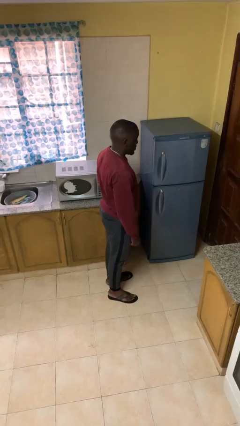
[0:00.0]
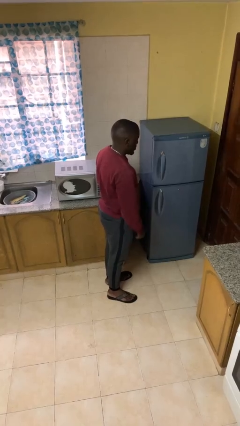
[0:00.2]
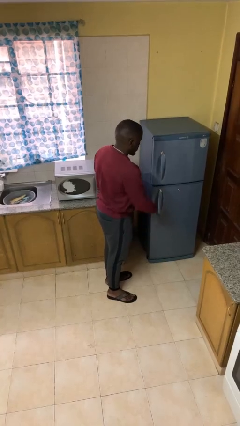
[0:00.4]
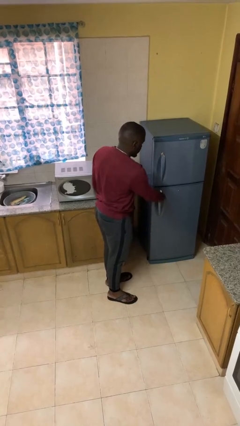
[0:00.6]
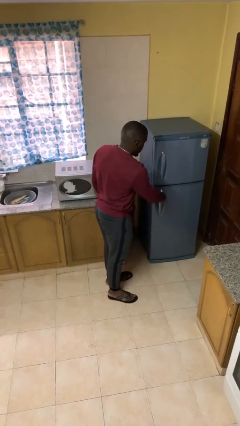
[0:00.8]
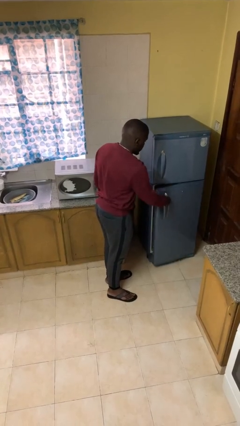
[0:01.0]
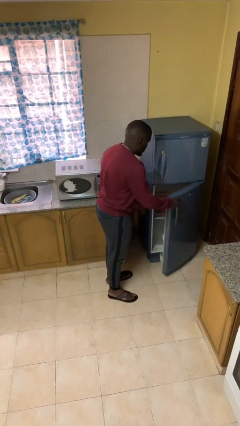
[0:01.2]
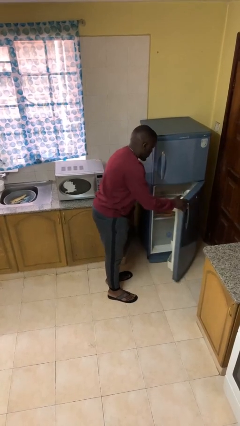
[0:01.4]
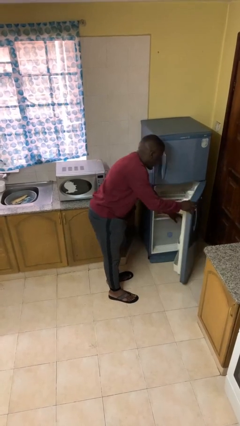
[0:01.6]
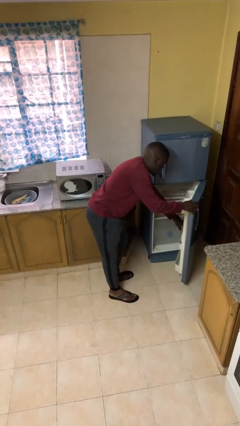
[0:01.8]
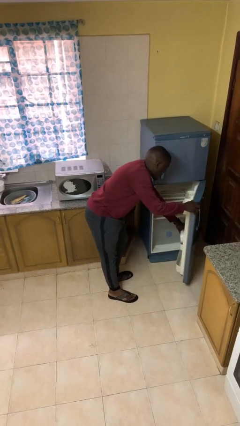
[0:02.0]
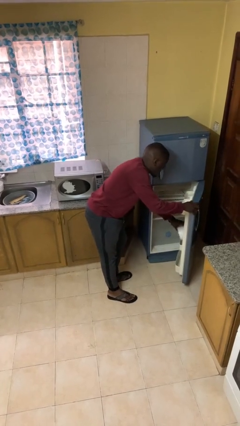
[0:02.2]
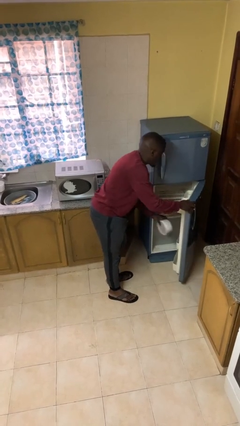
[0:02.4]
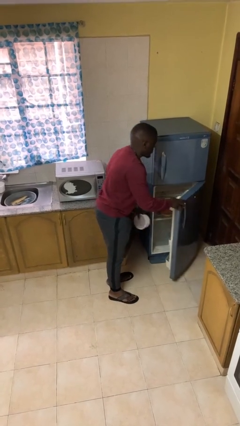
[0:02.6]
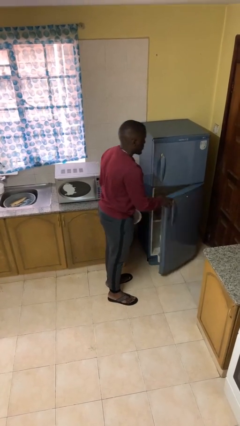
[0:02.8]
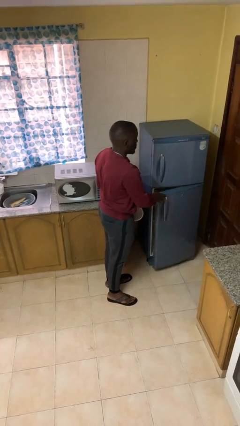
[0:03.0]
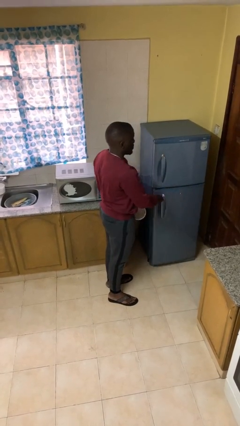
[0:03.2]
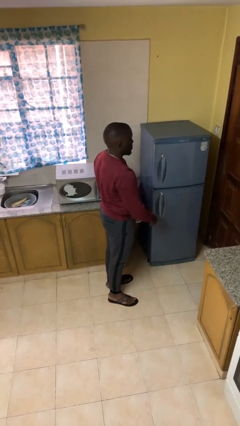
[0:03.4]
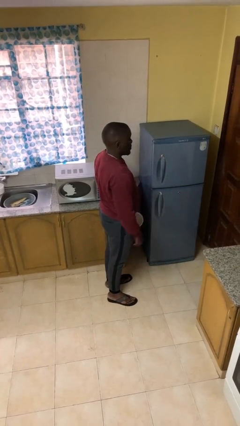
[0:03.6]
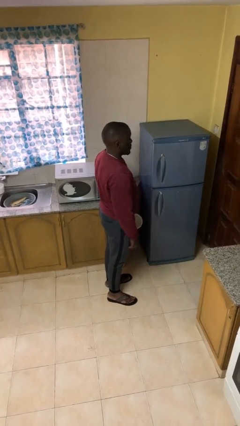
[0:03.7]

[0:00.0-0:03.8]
person takes object from refrigerator

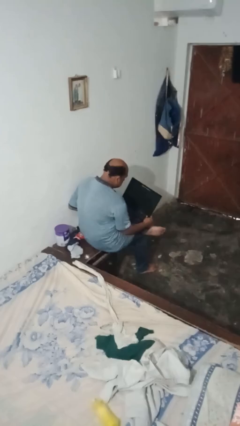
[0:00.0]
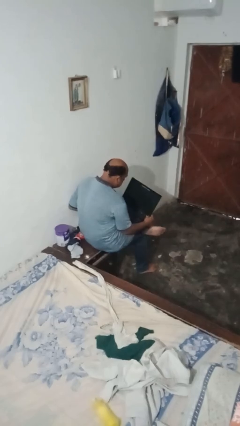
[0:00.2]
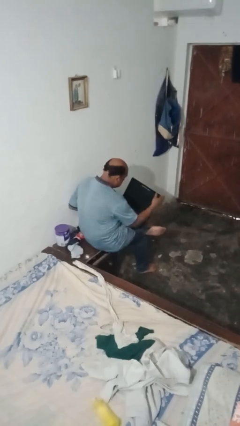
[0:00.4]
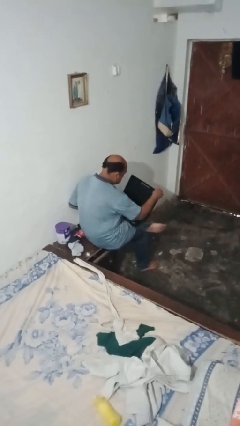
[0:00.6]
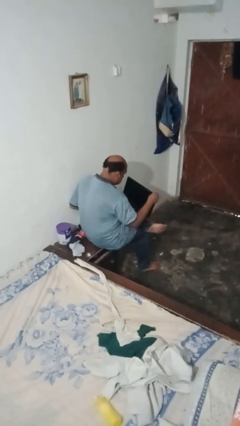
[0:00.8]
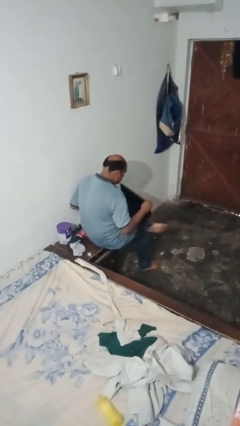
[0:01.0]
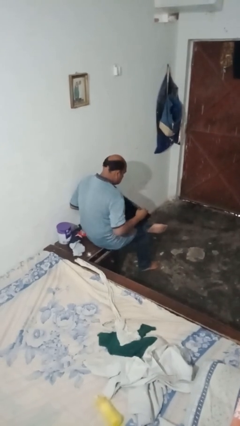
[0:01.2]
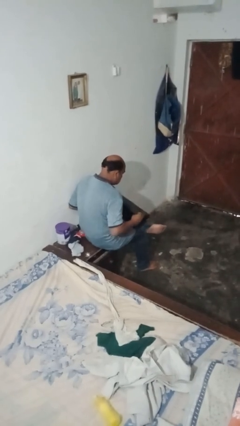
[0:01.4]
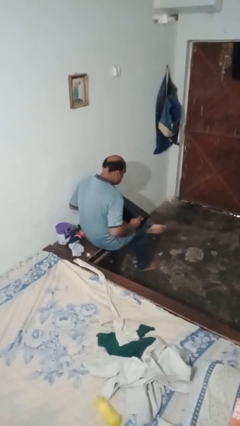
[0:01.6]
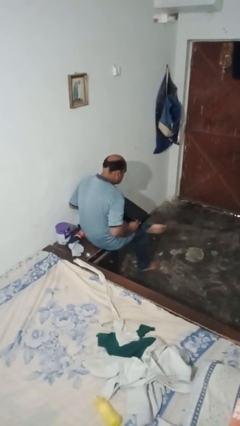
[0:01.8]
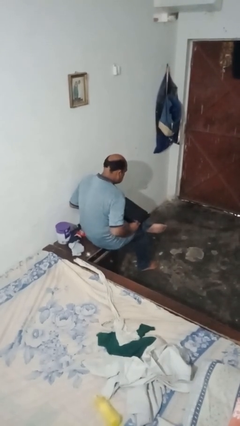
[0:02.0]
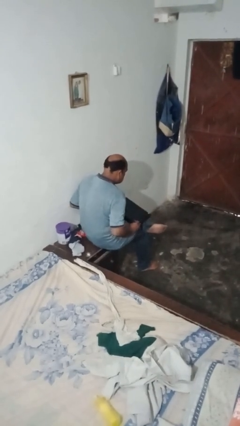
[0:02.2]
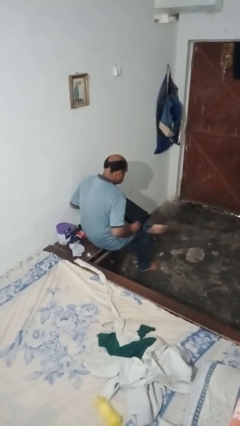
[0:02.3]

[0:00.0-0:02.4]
person closes laptop

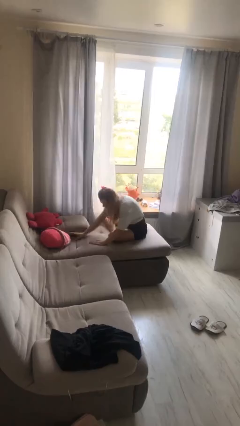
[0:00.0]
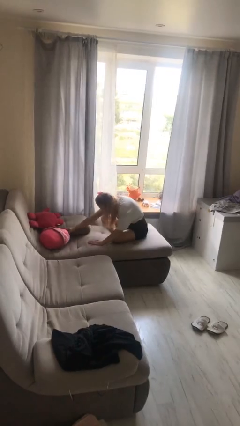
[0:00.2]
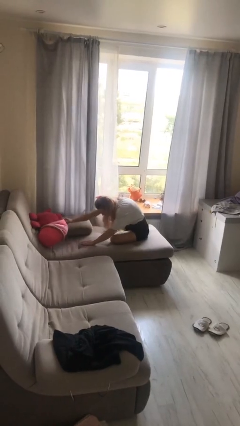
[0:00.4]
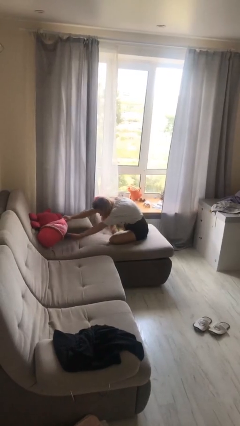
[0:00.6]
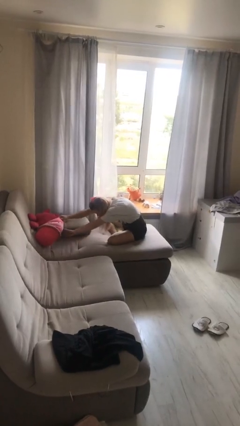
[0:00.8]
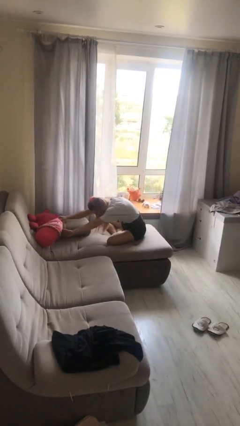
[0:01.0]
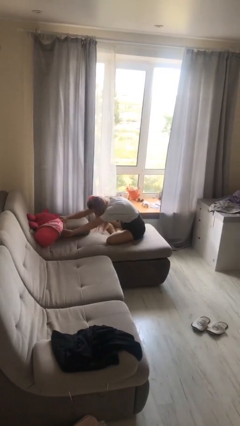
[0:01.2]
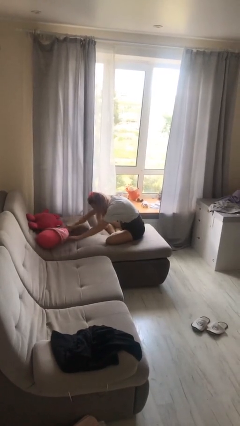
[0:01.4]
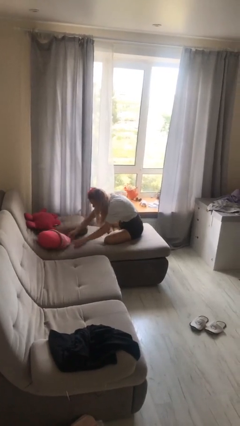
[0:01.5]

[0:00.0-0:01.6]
person searches under couch

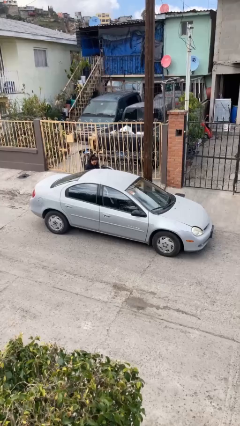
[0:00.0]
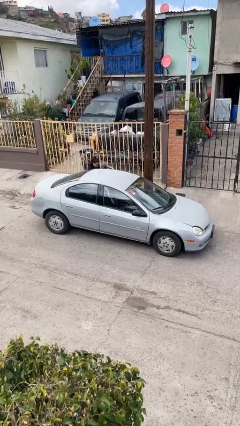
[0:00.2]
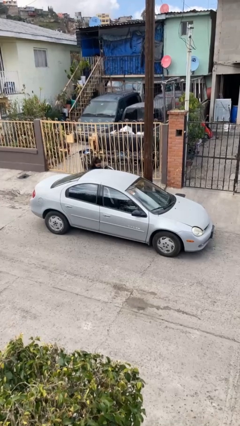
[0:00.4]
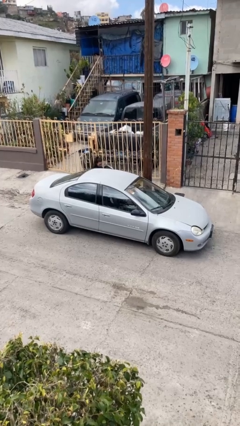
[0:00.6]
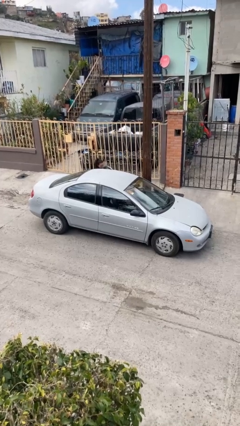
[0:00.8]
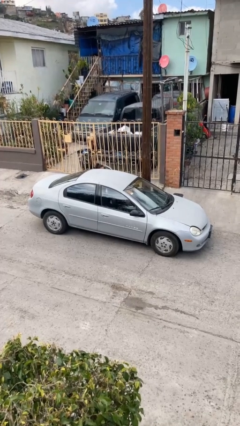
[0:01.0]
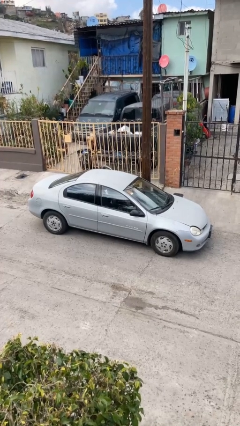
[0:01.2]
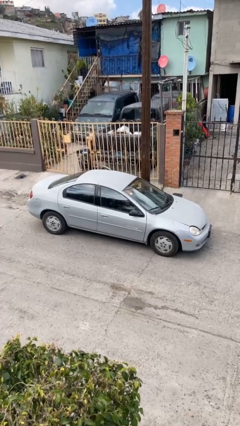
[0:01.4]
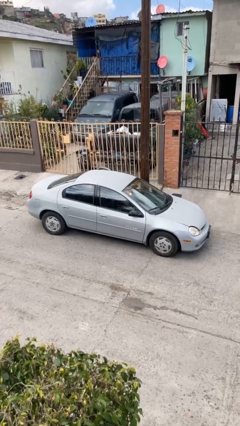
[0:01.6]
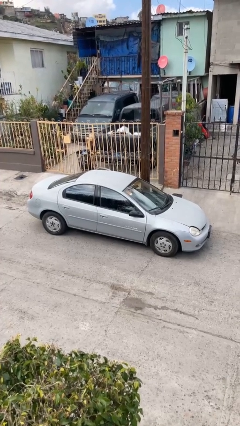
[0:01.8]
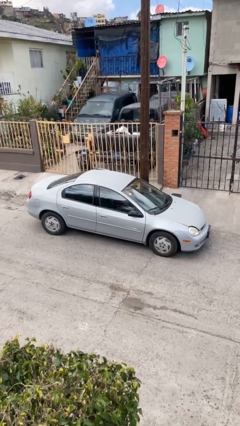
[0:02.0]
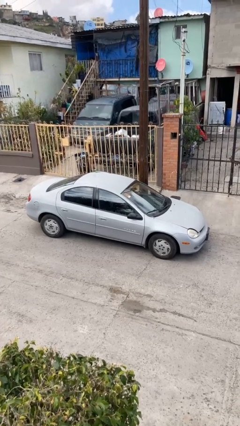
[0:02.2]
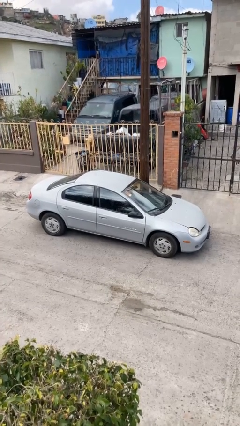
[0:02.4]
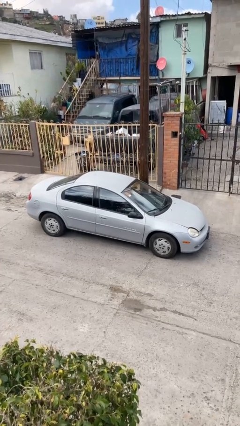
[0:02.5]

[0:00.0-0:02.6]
car picks up person

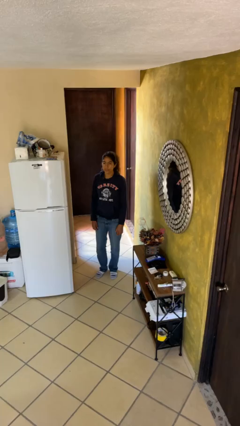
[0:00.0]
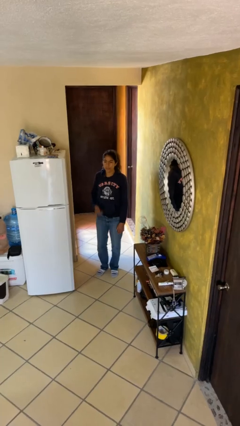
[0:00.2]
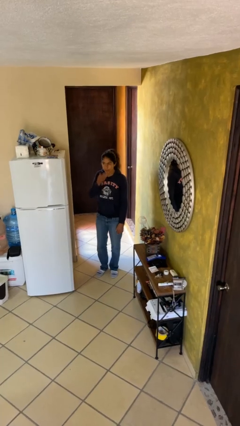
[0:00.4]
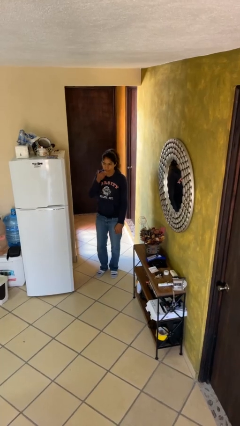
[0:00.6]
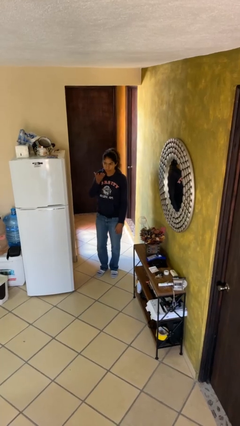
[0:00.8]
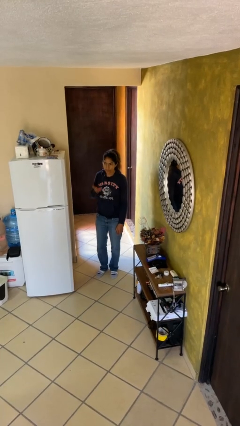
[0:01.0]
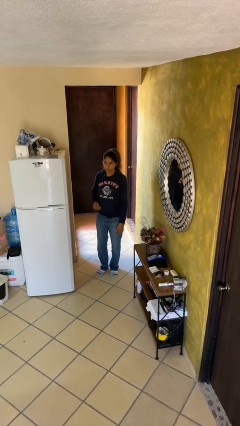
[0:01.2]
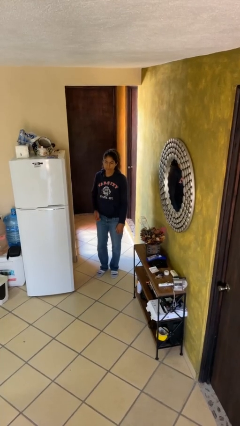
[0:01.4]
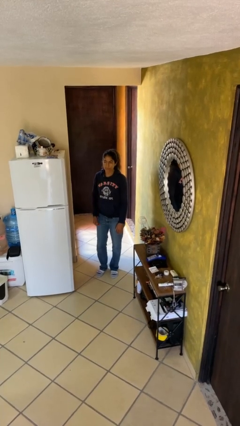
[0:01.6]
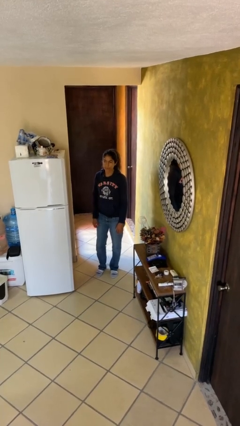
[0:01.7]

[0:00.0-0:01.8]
person gestures blow kiss

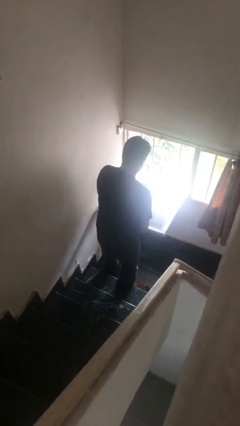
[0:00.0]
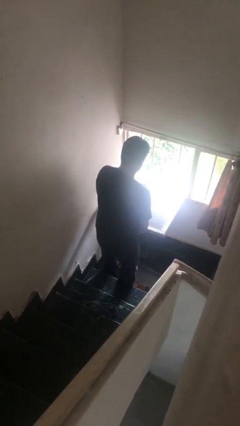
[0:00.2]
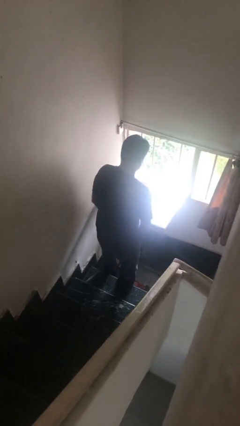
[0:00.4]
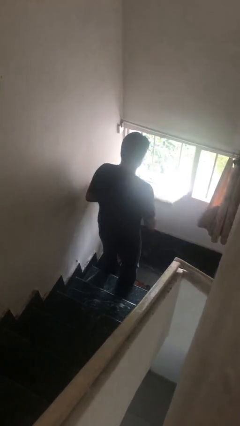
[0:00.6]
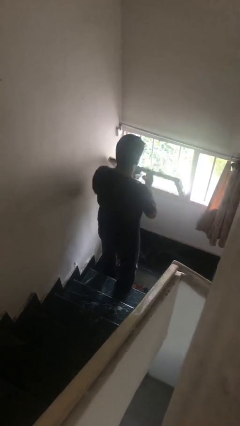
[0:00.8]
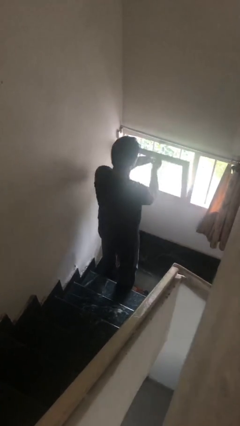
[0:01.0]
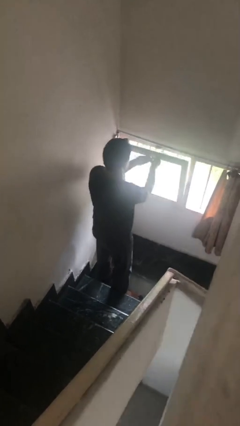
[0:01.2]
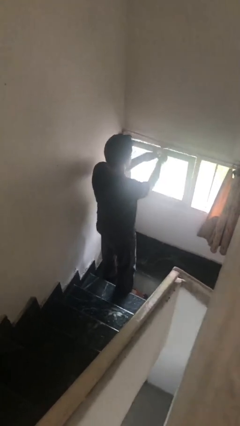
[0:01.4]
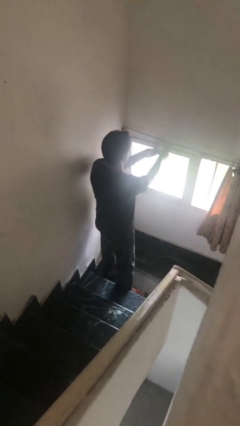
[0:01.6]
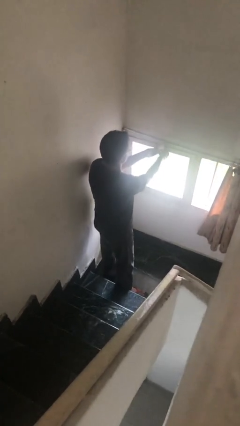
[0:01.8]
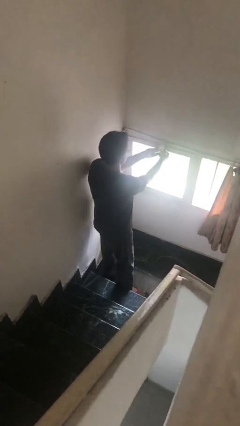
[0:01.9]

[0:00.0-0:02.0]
person closes home window

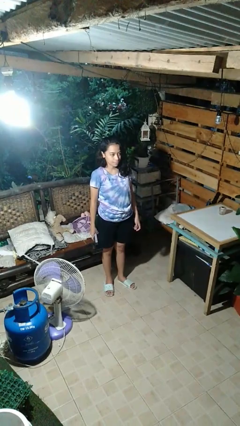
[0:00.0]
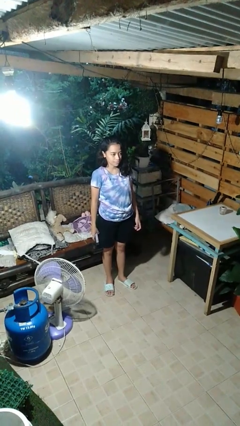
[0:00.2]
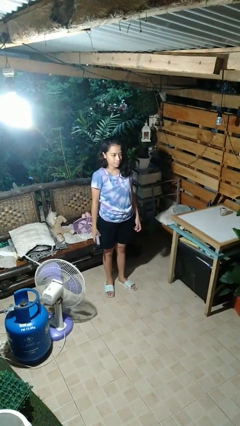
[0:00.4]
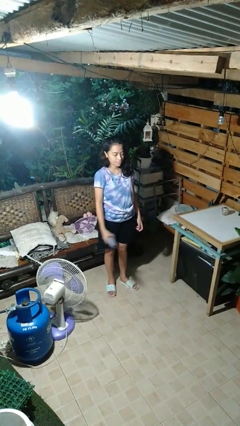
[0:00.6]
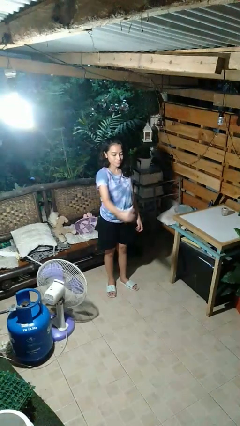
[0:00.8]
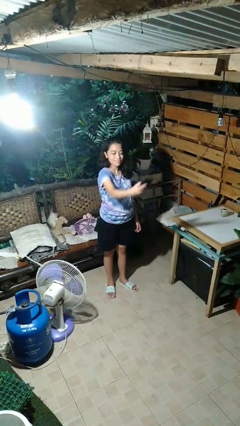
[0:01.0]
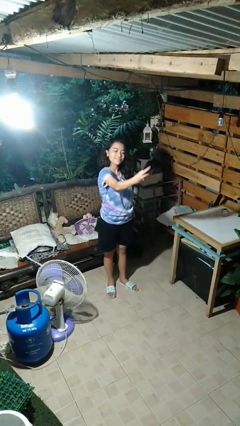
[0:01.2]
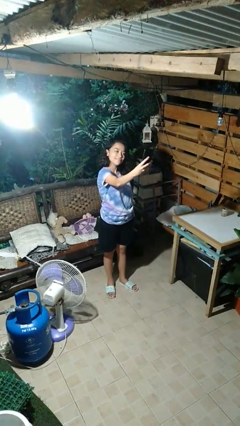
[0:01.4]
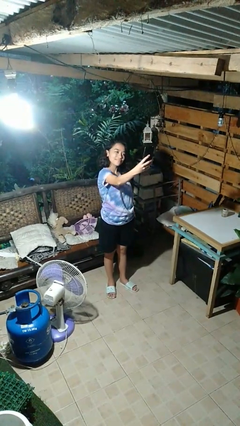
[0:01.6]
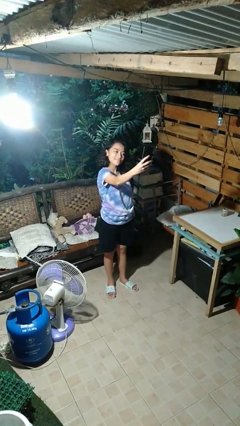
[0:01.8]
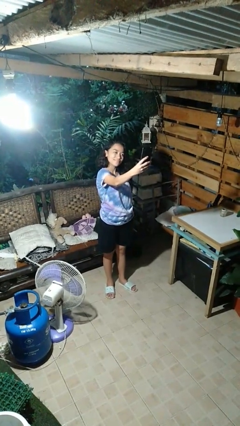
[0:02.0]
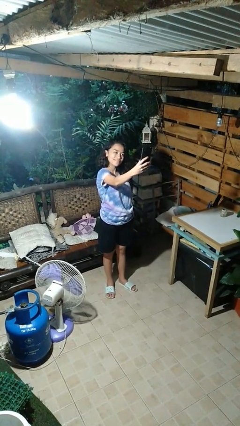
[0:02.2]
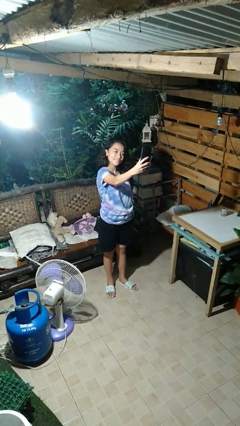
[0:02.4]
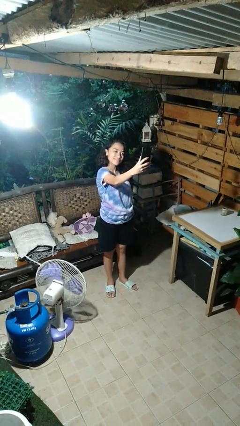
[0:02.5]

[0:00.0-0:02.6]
person takes selfie
